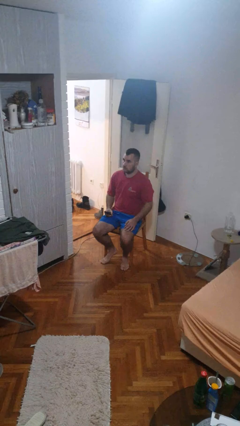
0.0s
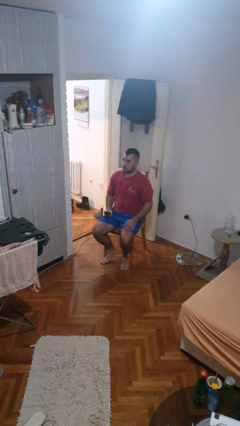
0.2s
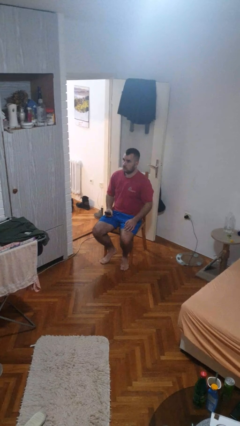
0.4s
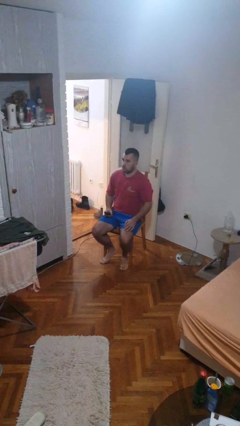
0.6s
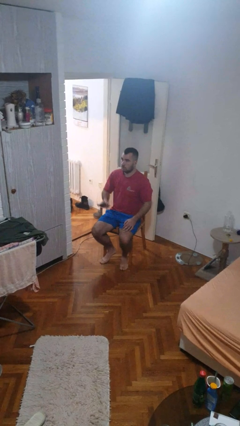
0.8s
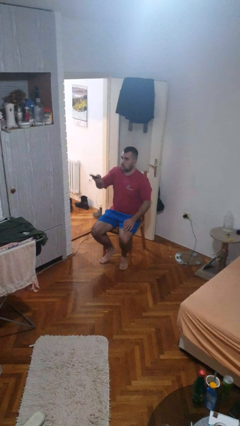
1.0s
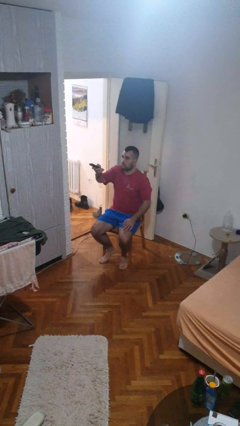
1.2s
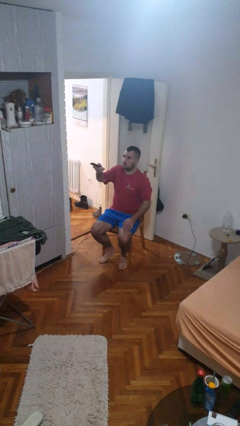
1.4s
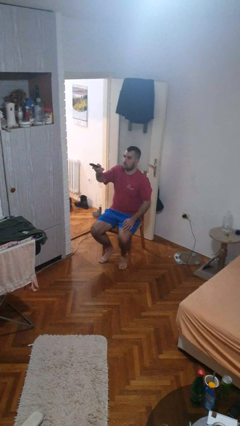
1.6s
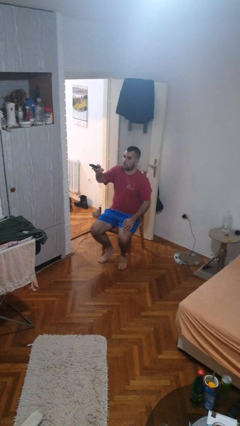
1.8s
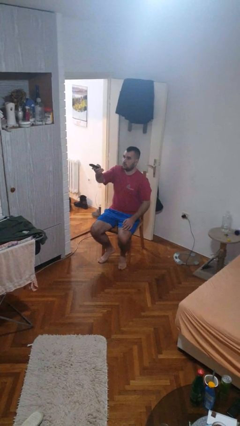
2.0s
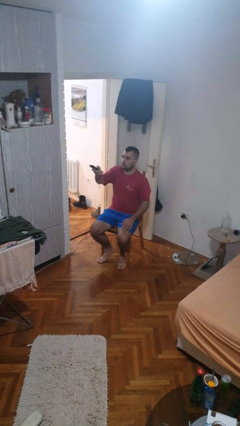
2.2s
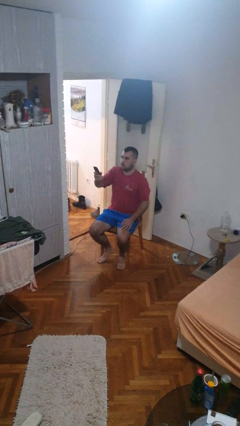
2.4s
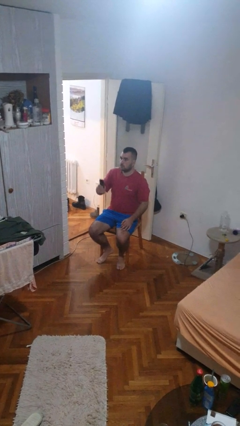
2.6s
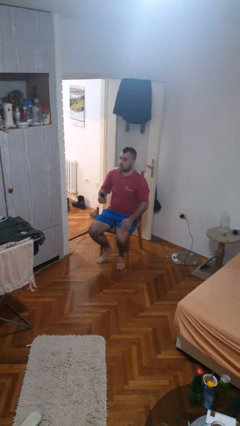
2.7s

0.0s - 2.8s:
person uses television remote

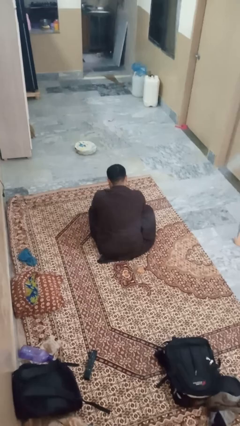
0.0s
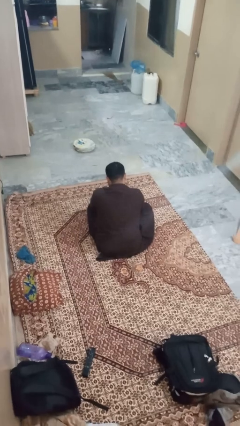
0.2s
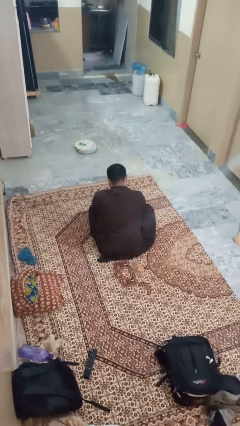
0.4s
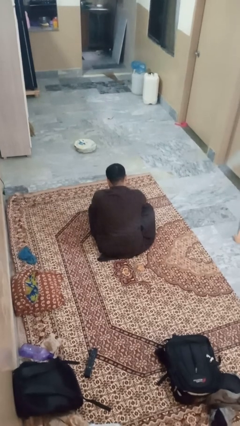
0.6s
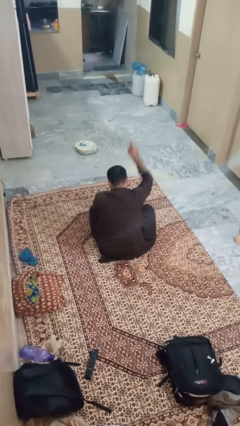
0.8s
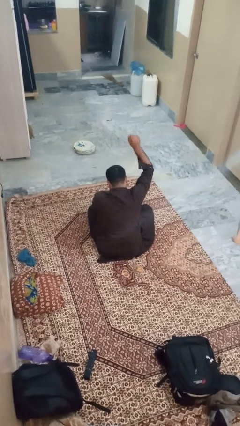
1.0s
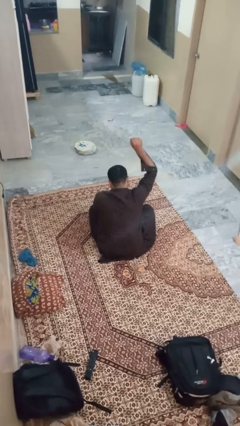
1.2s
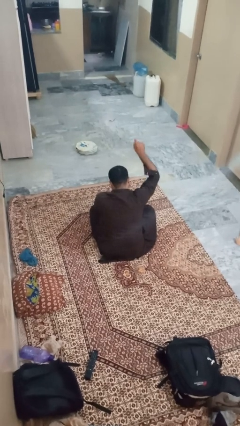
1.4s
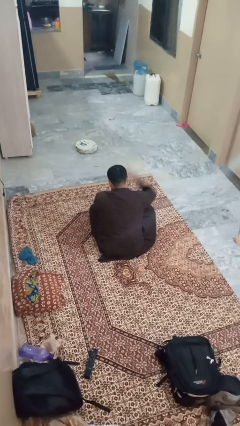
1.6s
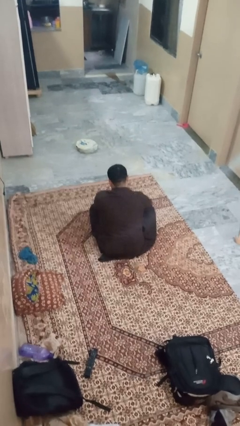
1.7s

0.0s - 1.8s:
person gestures number one

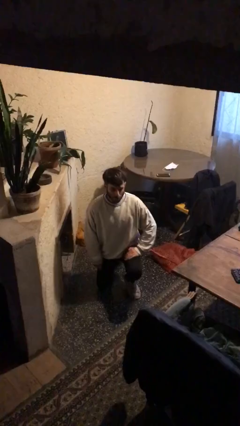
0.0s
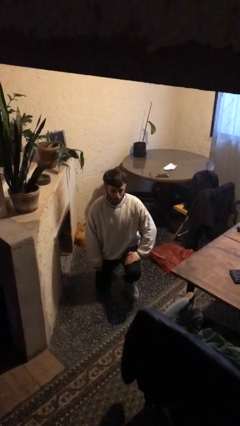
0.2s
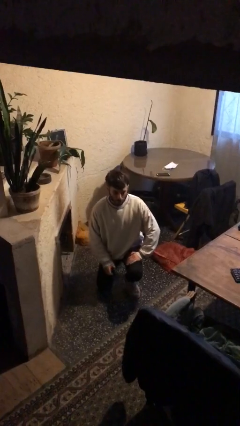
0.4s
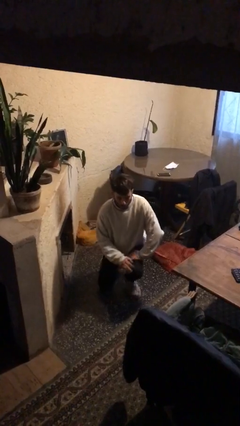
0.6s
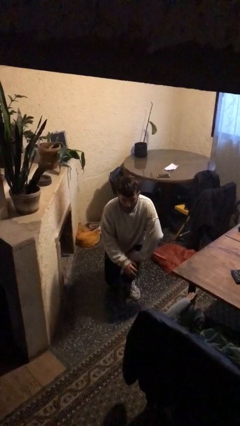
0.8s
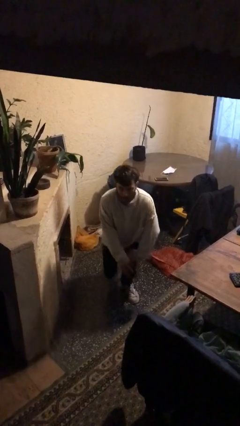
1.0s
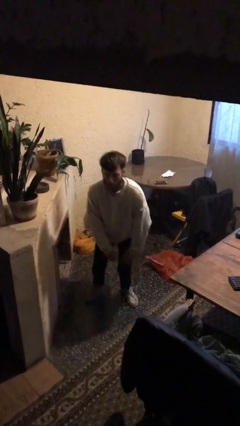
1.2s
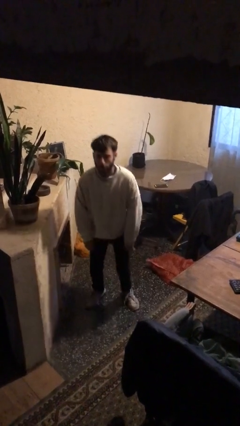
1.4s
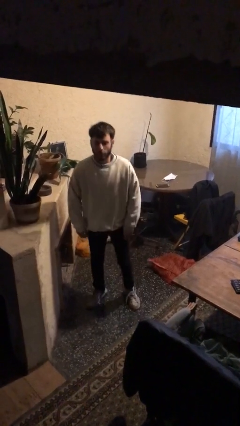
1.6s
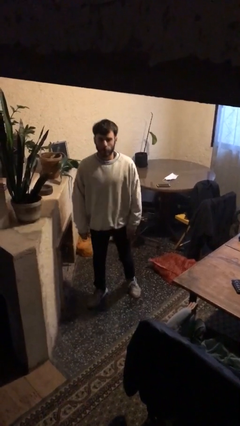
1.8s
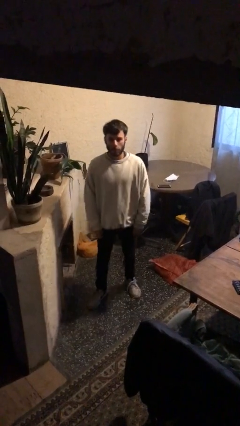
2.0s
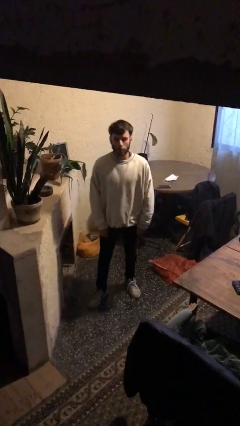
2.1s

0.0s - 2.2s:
person stands up from floor

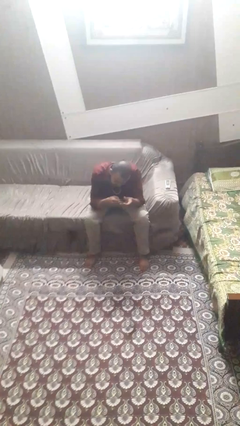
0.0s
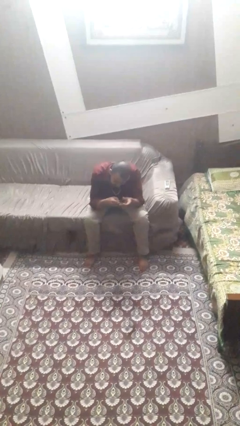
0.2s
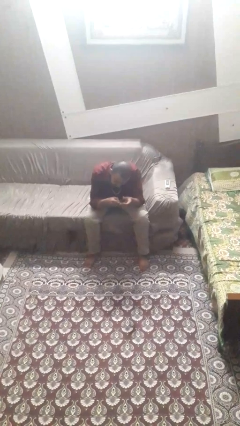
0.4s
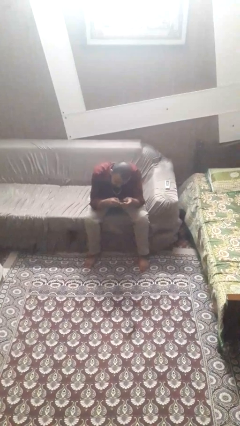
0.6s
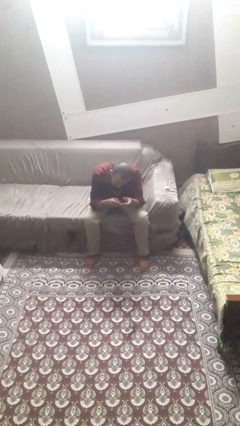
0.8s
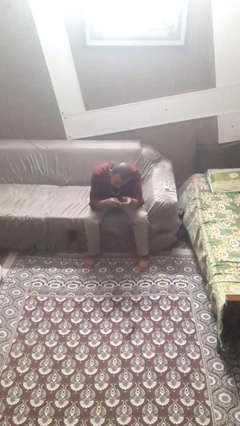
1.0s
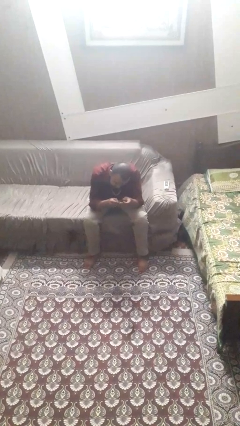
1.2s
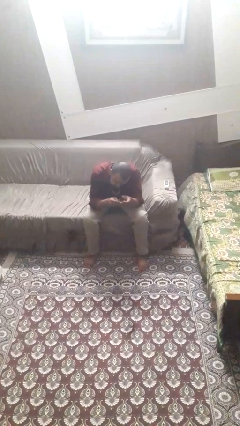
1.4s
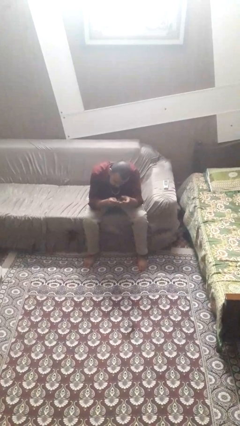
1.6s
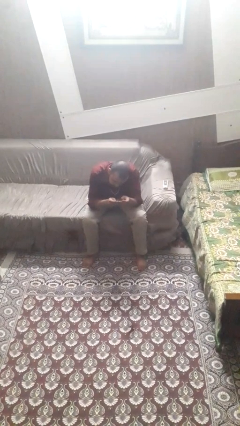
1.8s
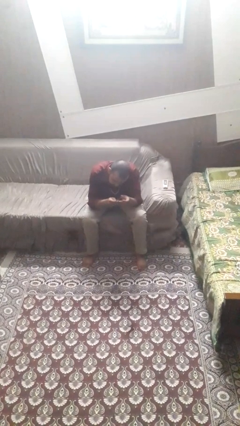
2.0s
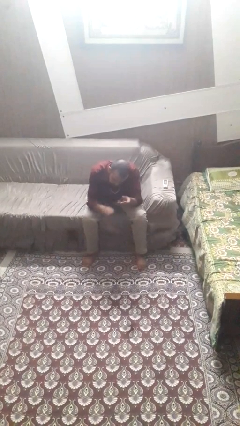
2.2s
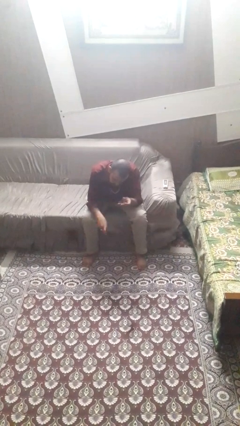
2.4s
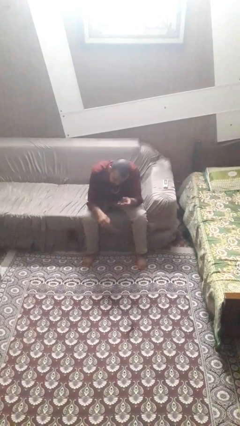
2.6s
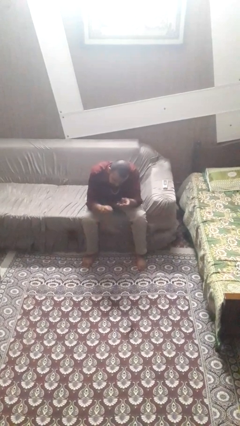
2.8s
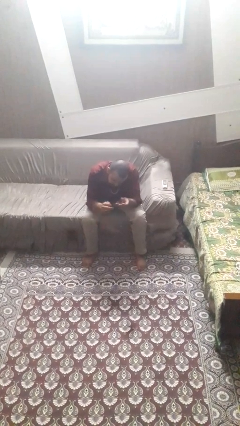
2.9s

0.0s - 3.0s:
person clips fingernails

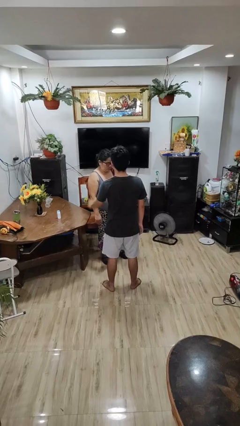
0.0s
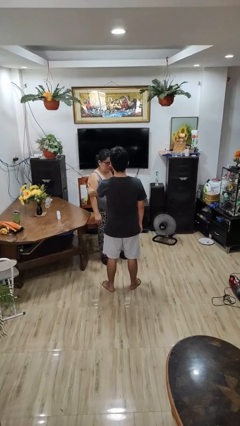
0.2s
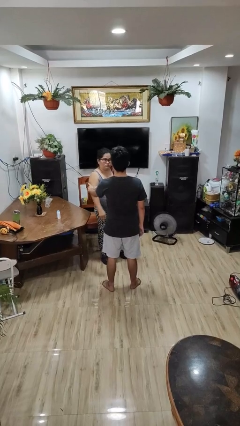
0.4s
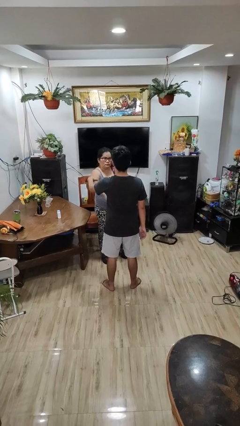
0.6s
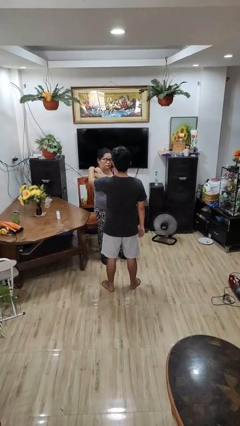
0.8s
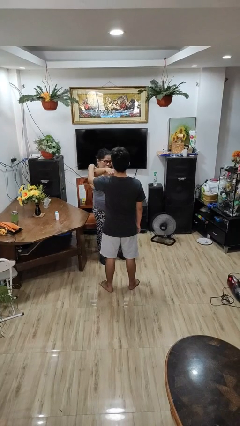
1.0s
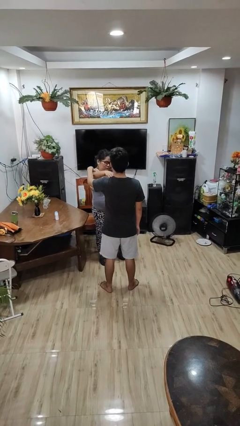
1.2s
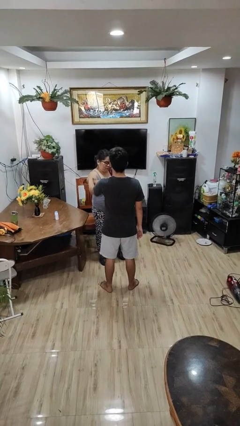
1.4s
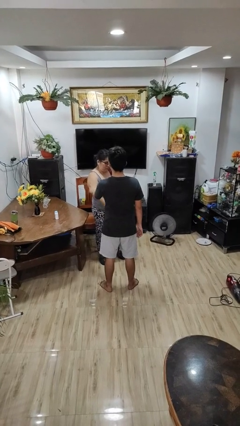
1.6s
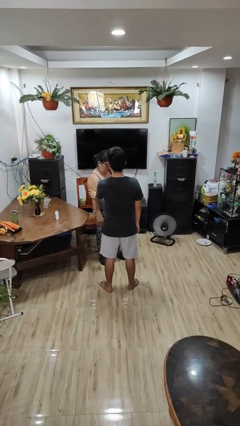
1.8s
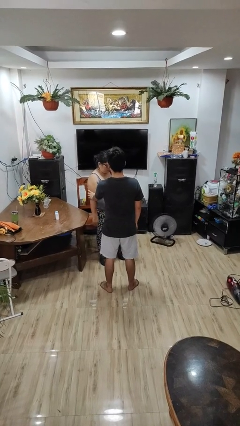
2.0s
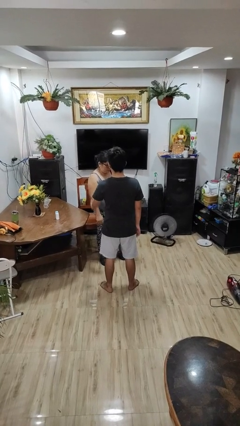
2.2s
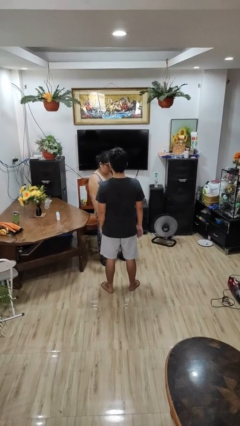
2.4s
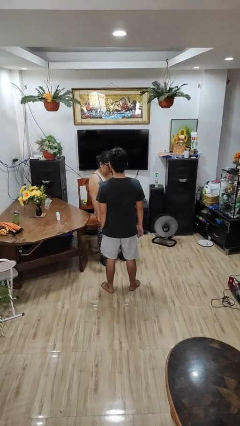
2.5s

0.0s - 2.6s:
person grabs person by bicep

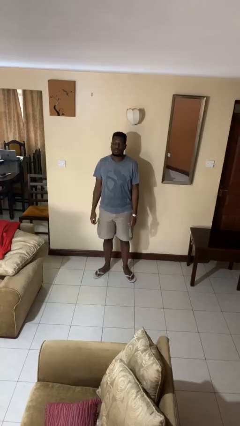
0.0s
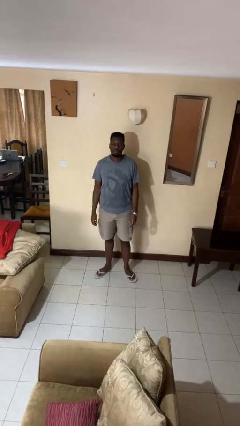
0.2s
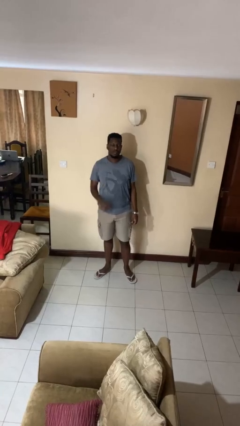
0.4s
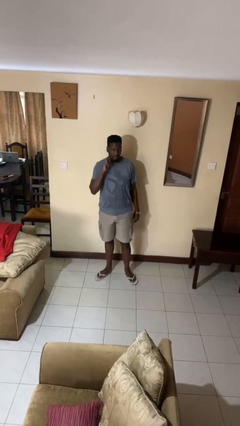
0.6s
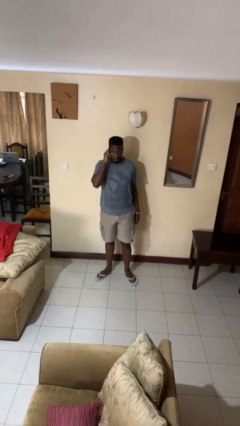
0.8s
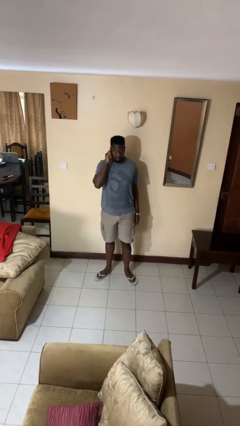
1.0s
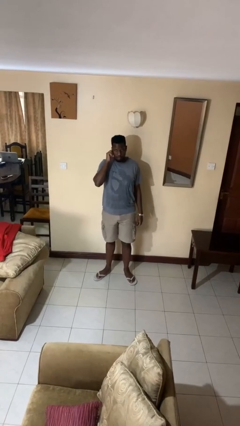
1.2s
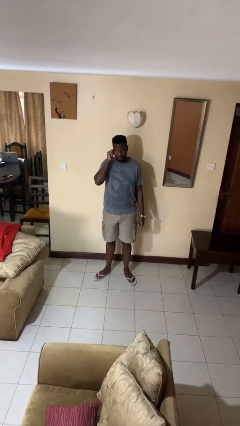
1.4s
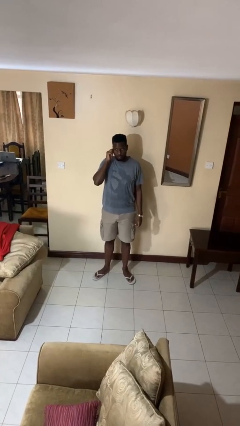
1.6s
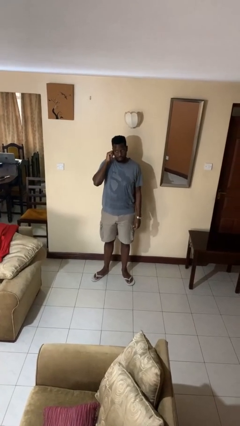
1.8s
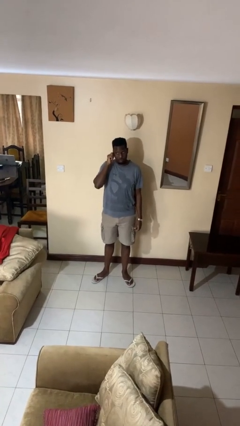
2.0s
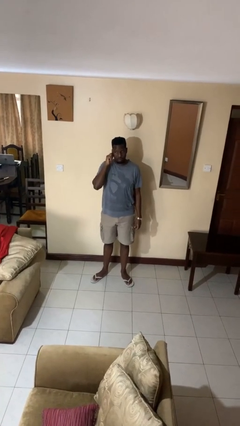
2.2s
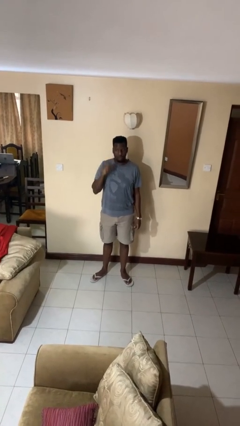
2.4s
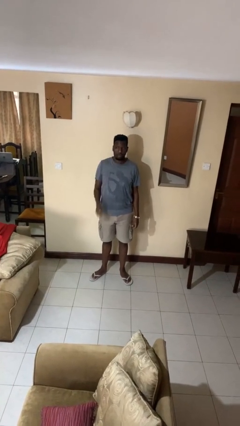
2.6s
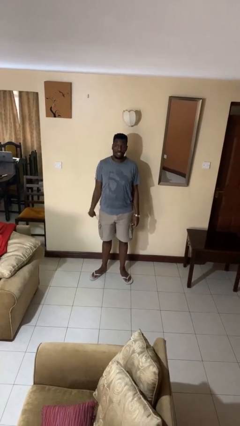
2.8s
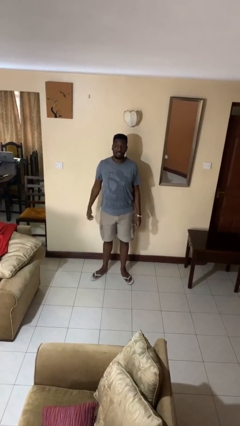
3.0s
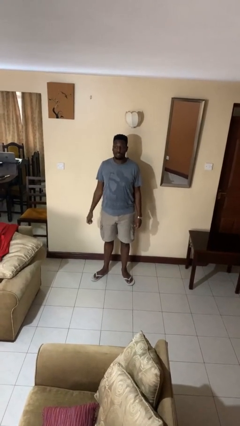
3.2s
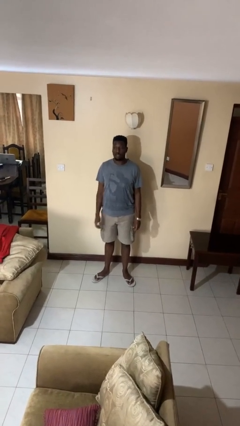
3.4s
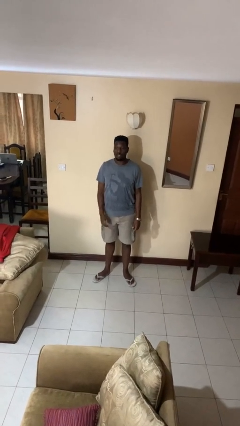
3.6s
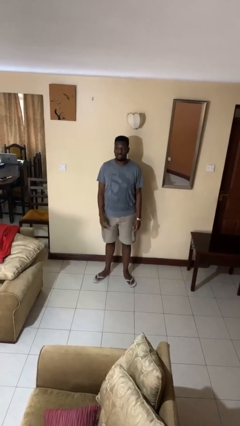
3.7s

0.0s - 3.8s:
person touches earlobe

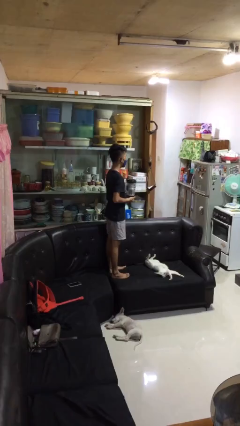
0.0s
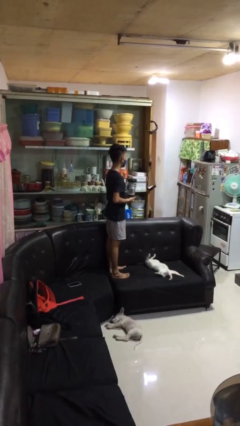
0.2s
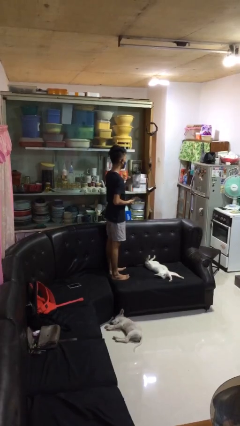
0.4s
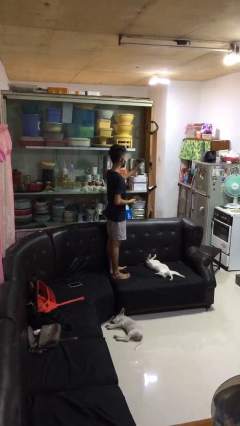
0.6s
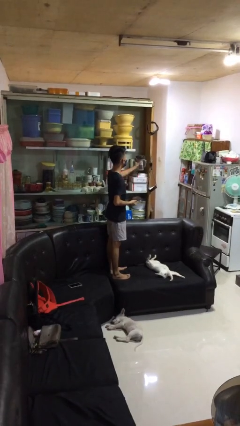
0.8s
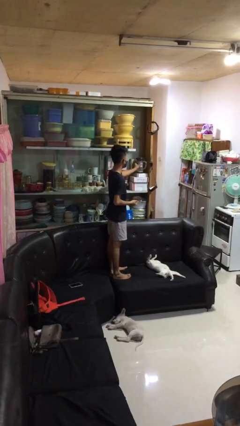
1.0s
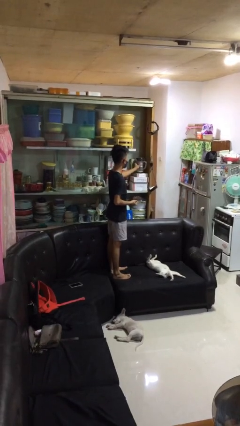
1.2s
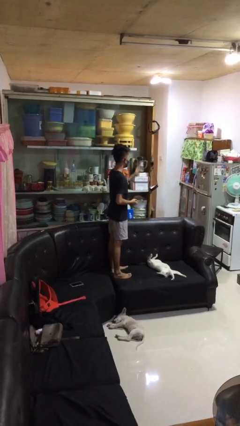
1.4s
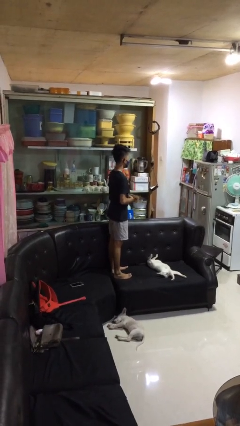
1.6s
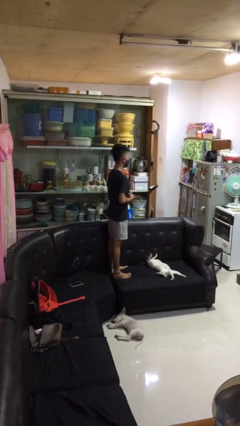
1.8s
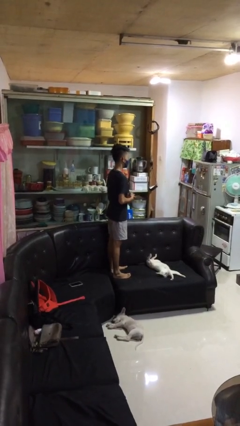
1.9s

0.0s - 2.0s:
person puts down object into cabinet
